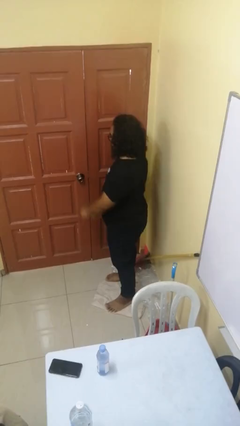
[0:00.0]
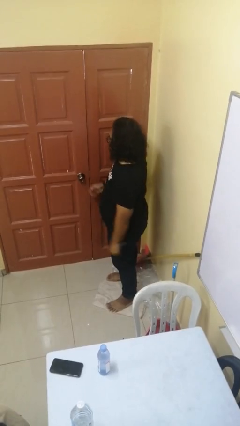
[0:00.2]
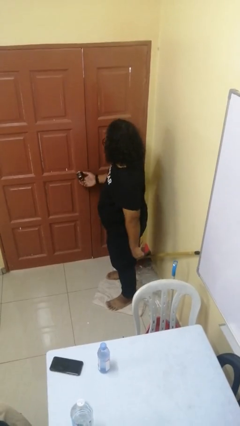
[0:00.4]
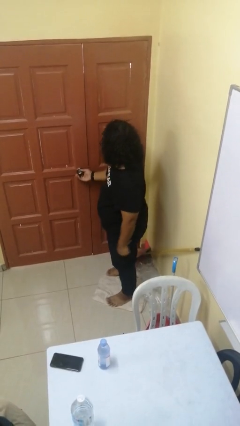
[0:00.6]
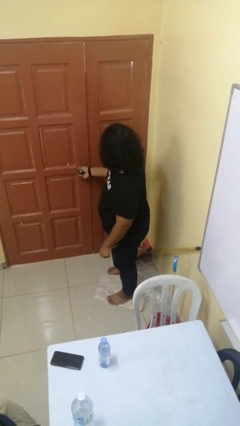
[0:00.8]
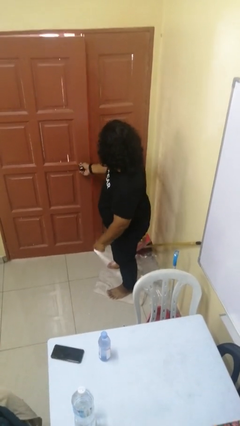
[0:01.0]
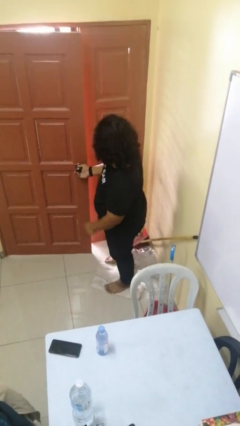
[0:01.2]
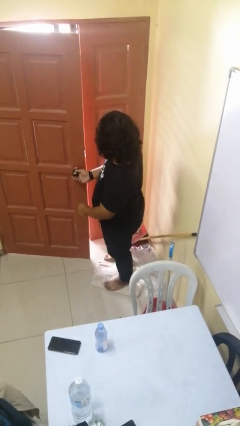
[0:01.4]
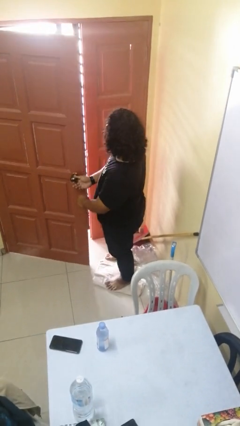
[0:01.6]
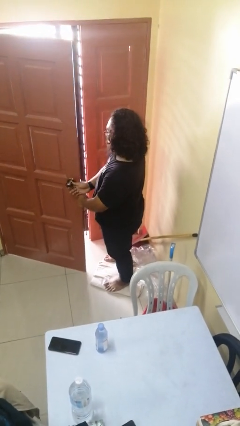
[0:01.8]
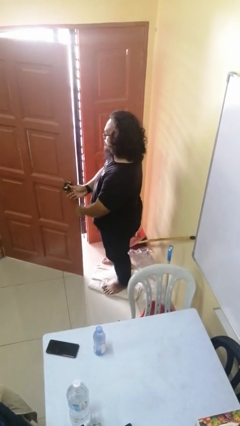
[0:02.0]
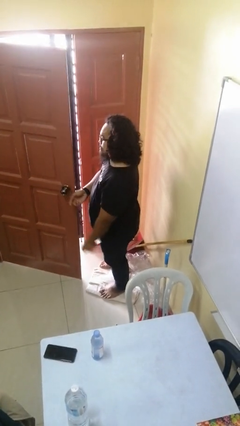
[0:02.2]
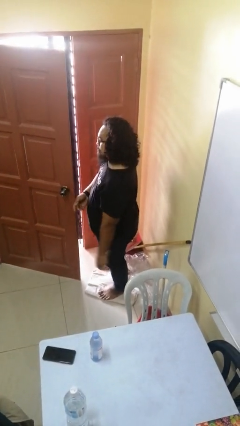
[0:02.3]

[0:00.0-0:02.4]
person opens facility door

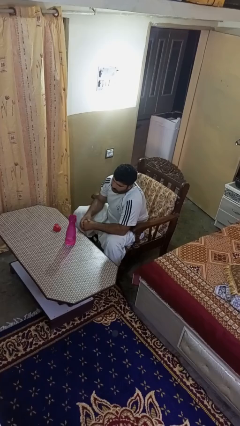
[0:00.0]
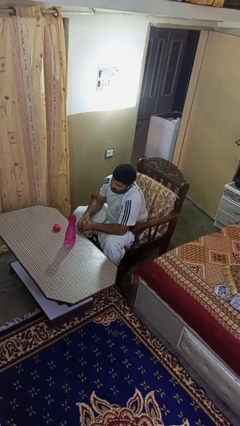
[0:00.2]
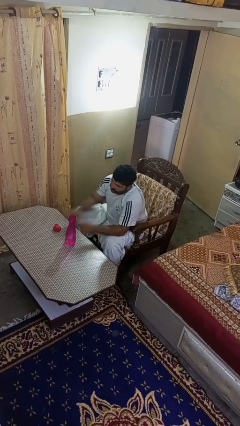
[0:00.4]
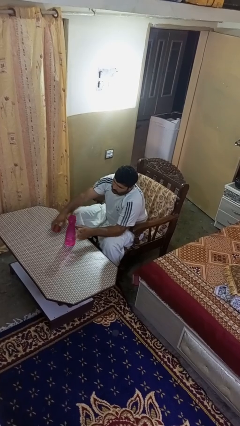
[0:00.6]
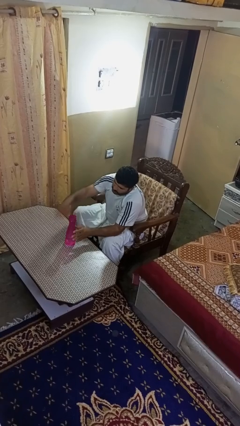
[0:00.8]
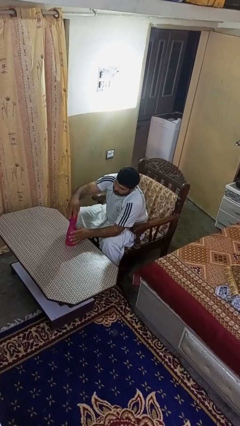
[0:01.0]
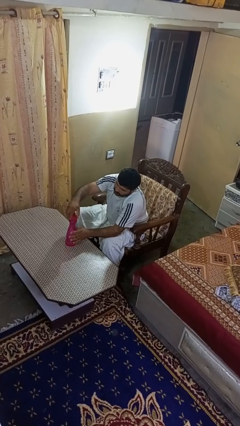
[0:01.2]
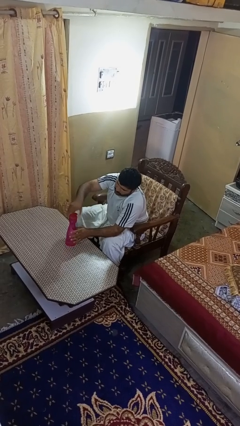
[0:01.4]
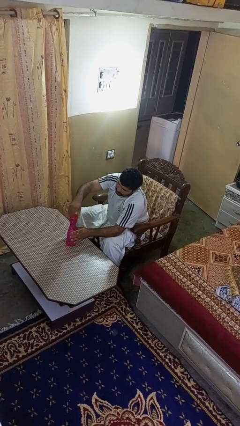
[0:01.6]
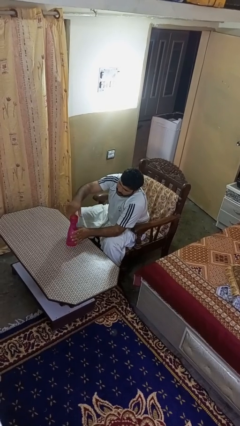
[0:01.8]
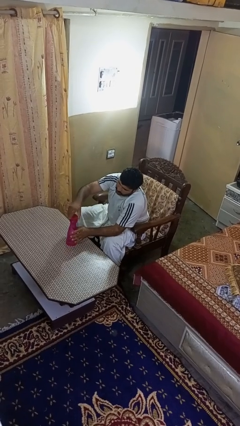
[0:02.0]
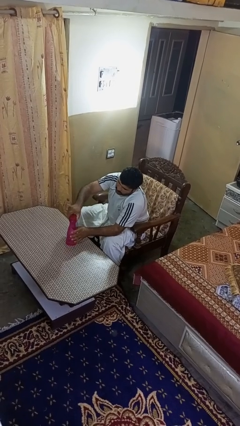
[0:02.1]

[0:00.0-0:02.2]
person screws lid to bottle

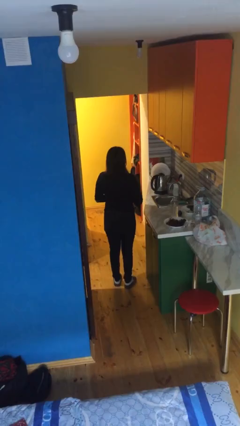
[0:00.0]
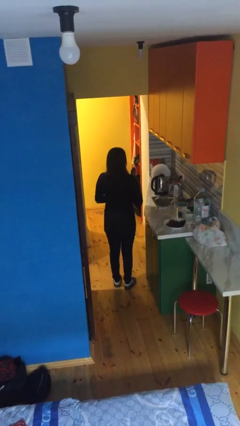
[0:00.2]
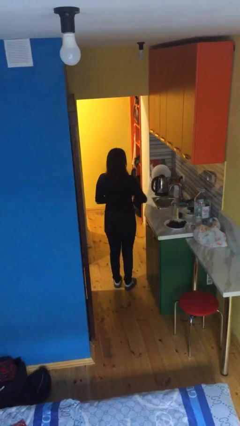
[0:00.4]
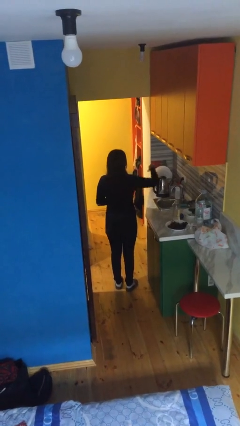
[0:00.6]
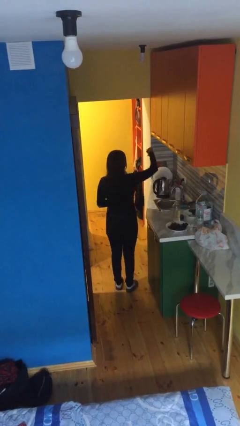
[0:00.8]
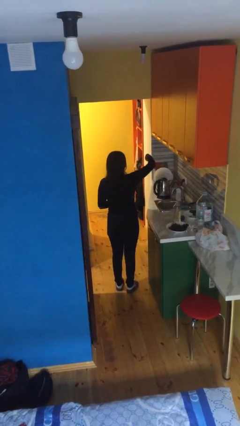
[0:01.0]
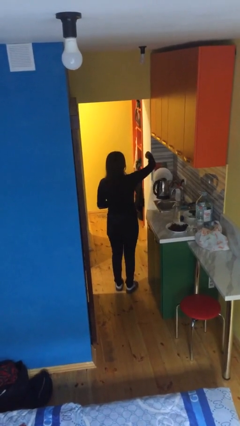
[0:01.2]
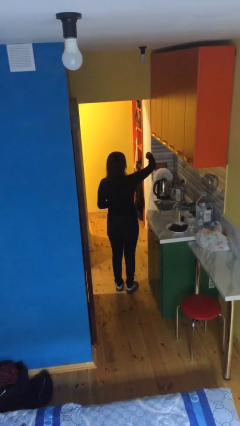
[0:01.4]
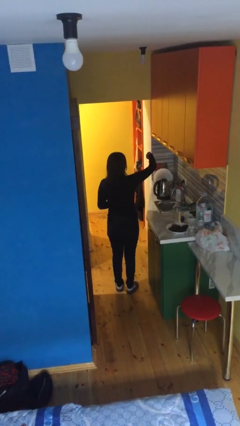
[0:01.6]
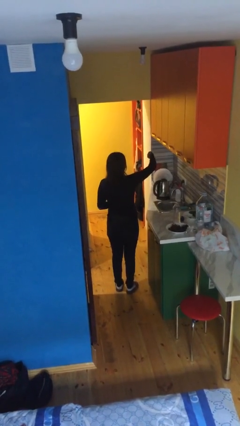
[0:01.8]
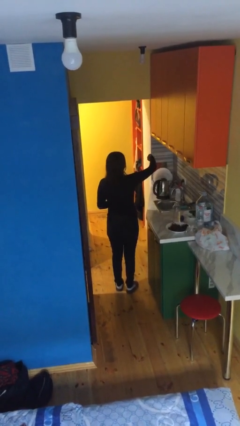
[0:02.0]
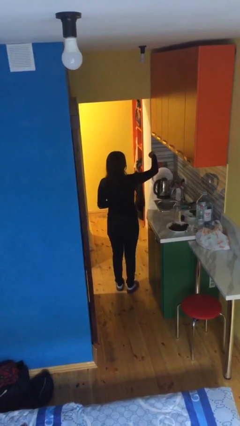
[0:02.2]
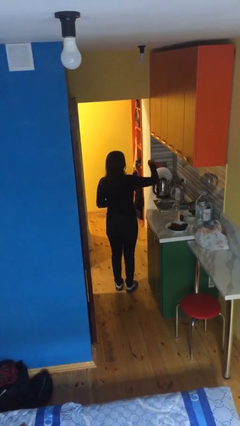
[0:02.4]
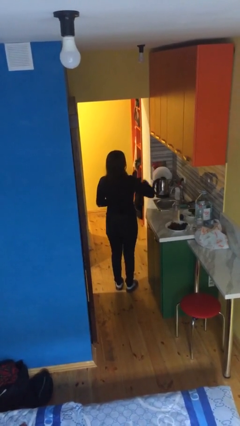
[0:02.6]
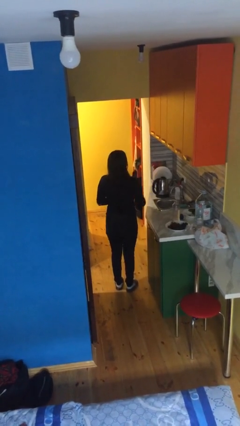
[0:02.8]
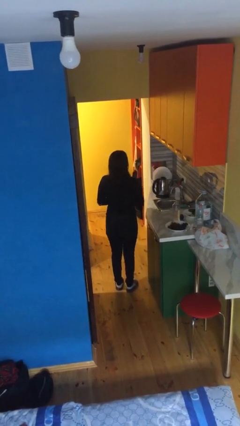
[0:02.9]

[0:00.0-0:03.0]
person gestures thumbs down

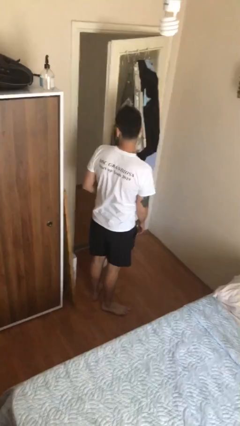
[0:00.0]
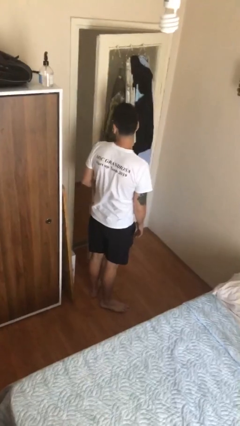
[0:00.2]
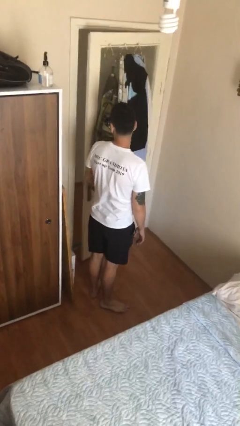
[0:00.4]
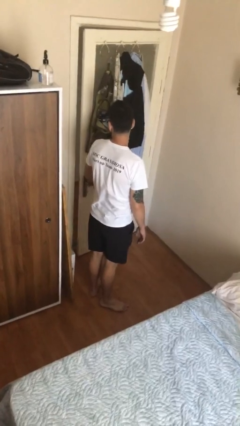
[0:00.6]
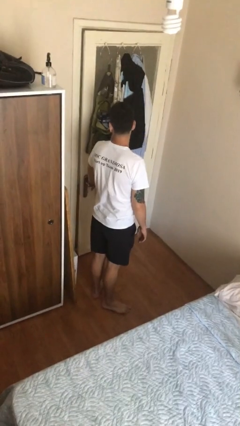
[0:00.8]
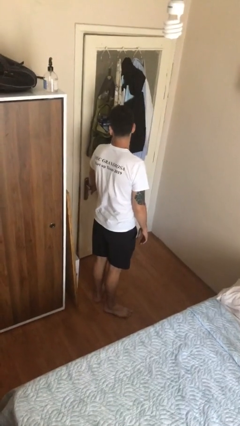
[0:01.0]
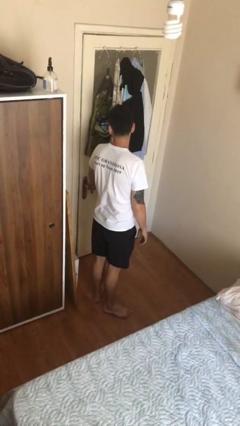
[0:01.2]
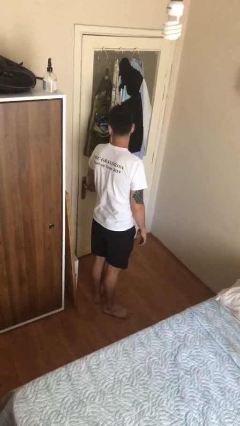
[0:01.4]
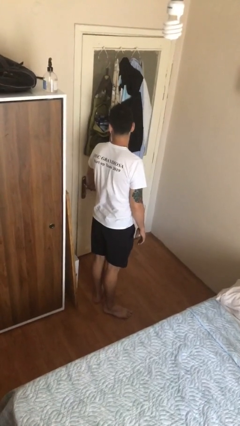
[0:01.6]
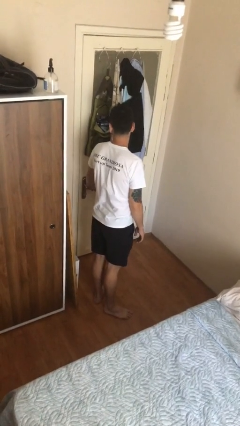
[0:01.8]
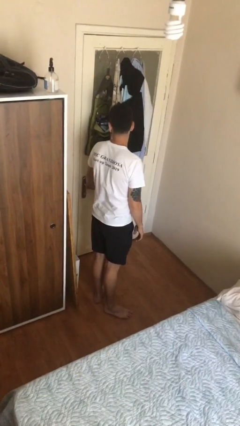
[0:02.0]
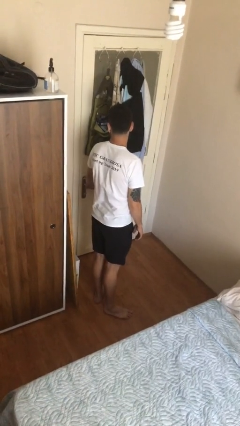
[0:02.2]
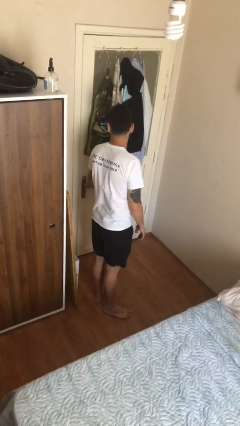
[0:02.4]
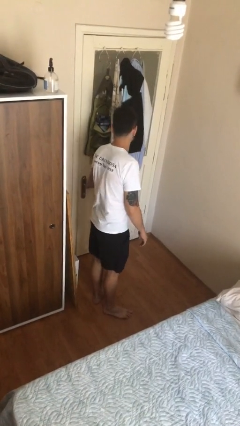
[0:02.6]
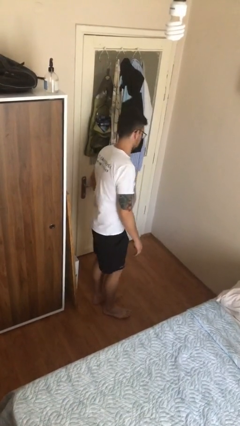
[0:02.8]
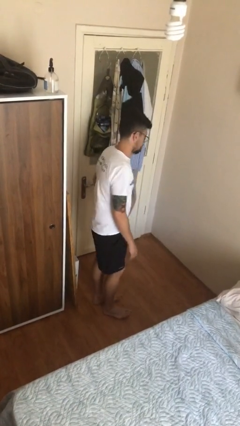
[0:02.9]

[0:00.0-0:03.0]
person closes facility door

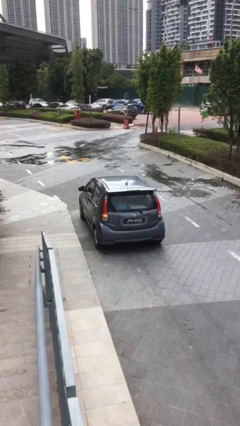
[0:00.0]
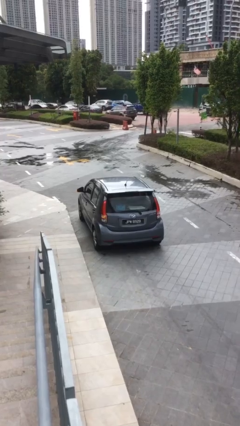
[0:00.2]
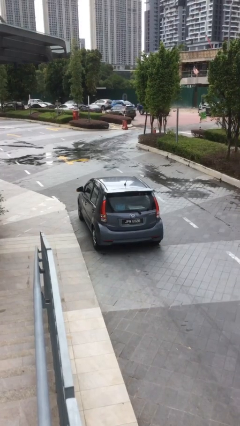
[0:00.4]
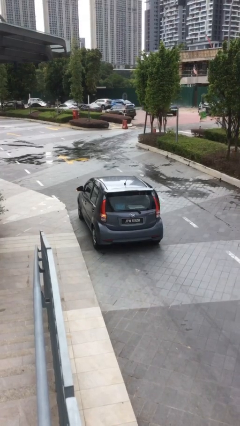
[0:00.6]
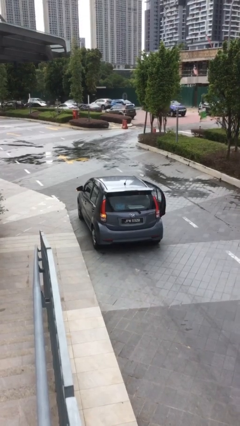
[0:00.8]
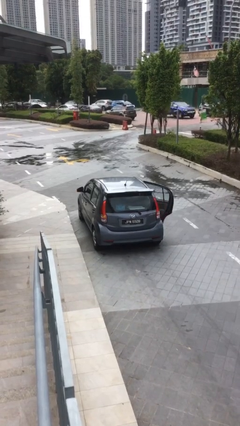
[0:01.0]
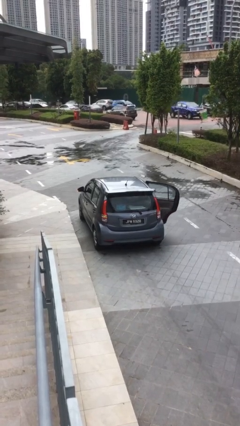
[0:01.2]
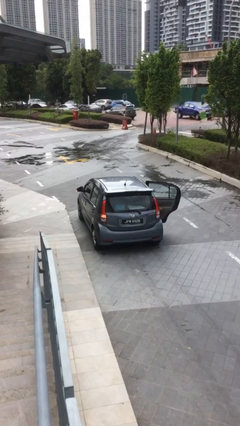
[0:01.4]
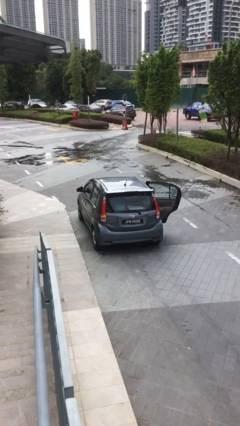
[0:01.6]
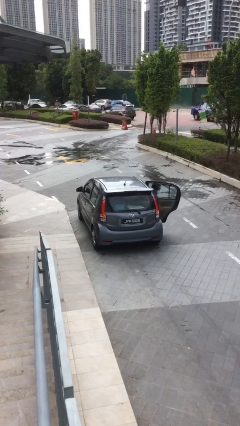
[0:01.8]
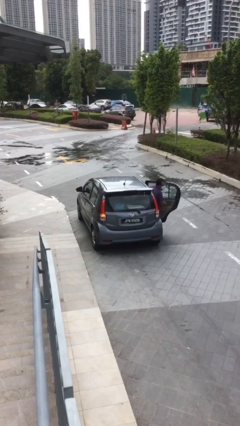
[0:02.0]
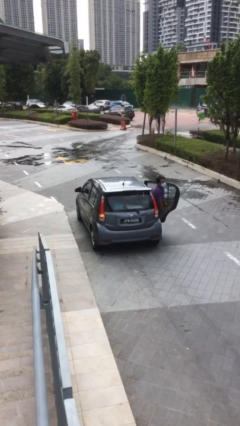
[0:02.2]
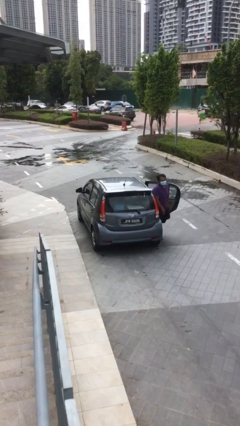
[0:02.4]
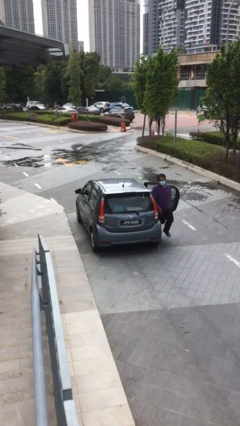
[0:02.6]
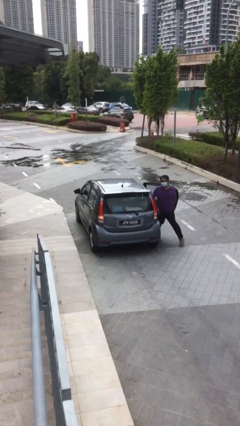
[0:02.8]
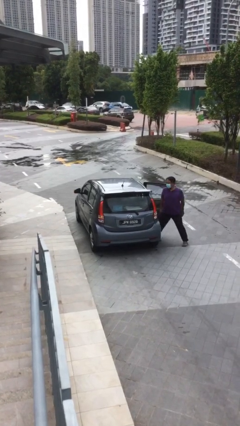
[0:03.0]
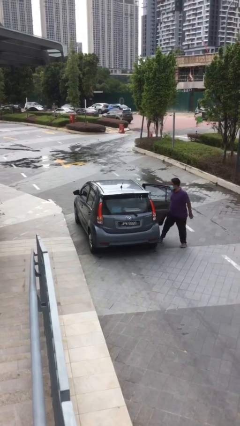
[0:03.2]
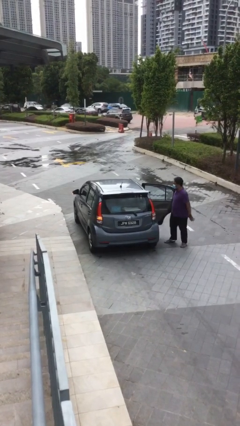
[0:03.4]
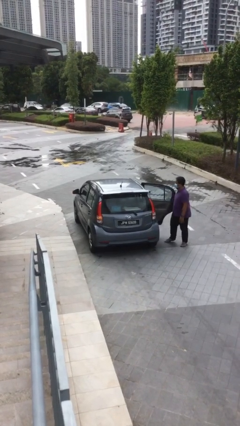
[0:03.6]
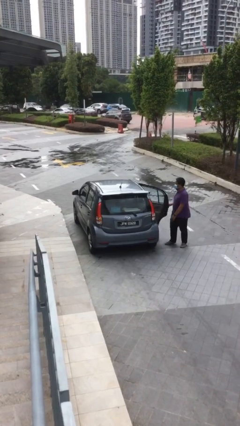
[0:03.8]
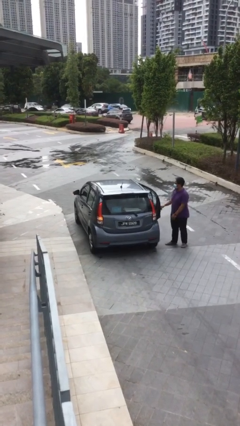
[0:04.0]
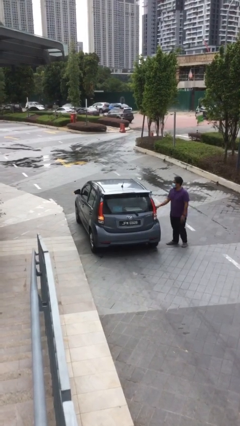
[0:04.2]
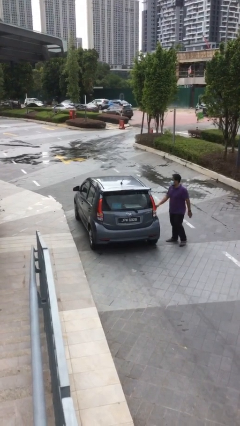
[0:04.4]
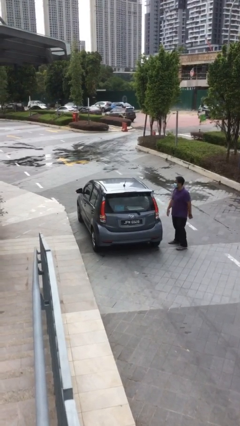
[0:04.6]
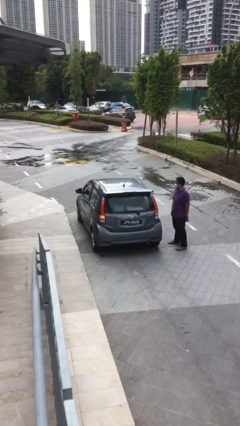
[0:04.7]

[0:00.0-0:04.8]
car drops off person

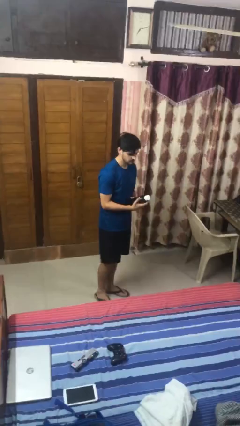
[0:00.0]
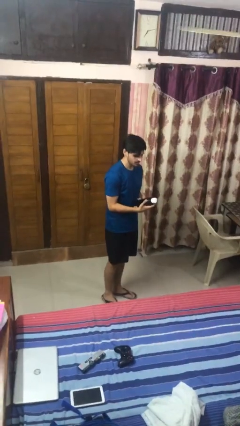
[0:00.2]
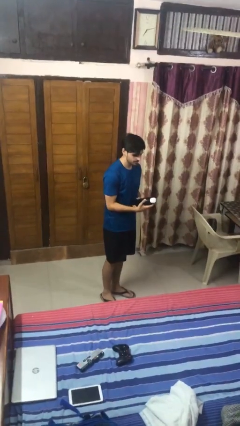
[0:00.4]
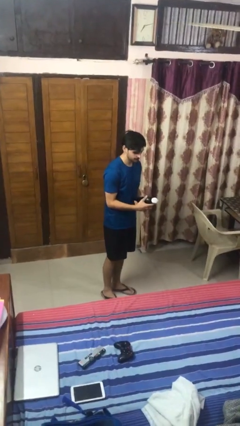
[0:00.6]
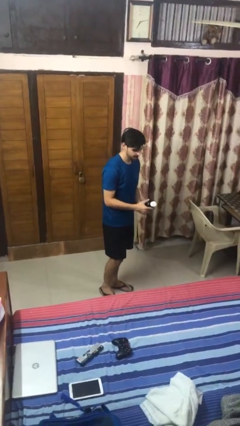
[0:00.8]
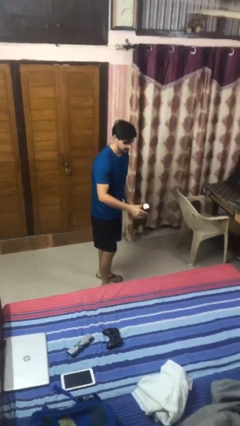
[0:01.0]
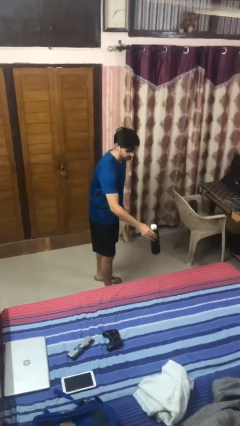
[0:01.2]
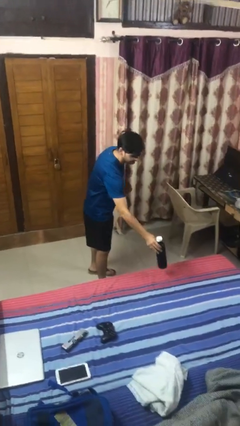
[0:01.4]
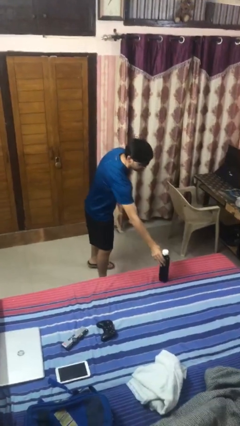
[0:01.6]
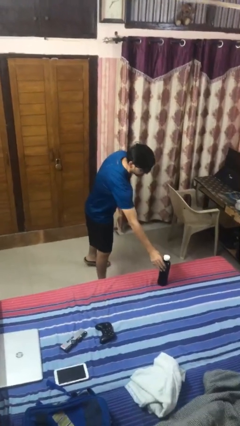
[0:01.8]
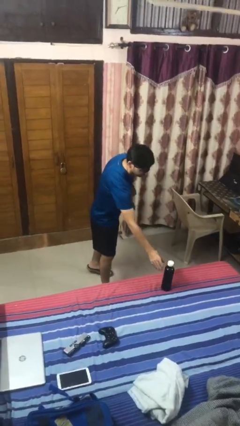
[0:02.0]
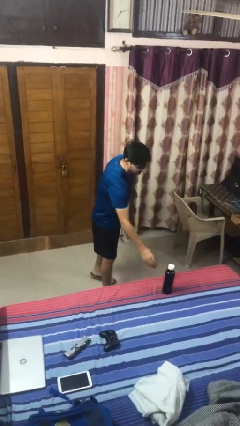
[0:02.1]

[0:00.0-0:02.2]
person puts down object on bed
